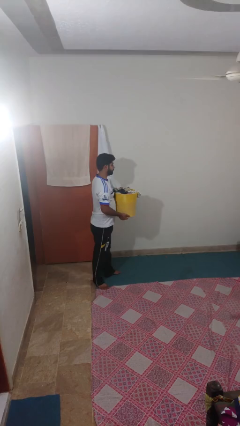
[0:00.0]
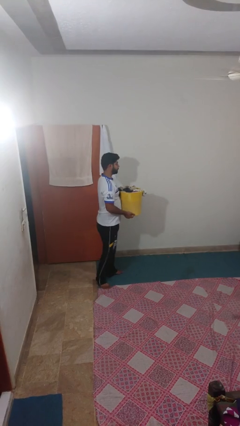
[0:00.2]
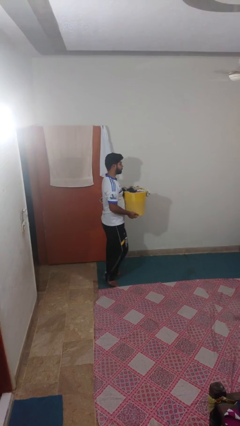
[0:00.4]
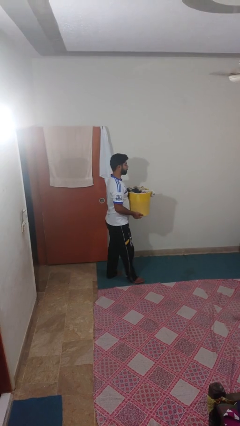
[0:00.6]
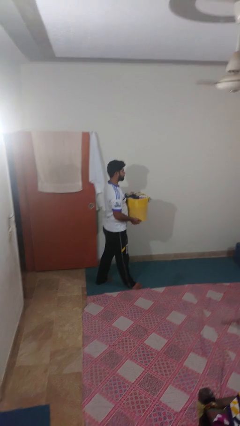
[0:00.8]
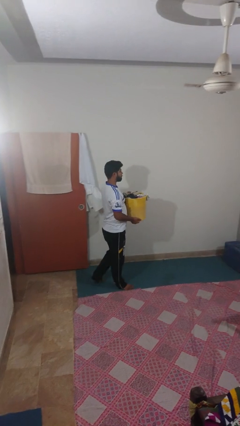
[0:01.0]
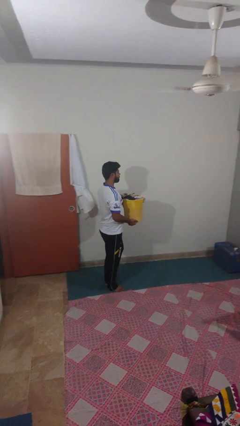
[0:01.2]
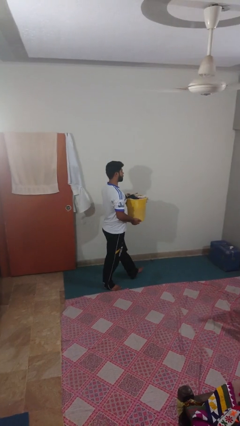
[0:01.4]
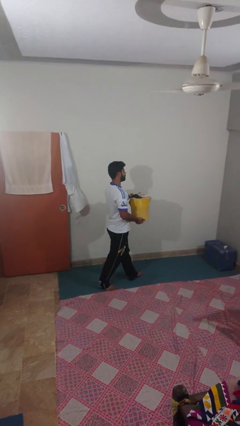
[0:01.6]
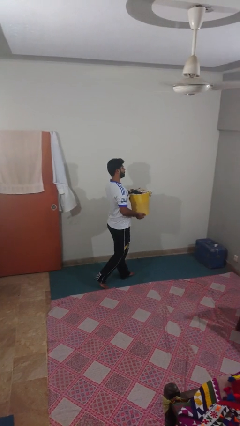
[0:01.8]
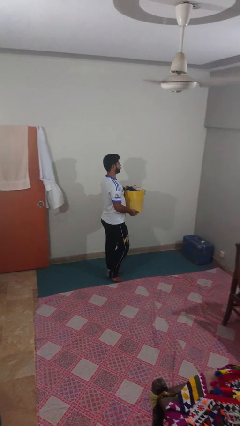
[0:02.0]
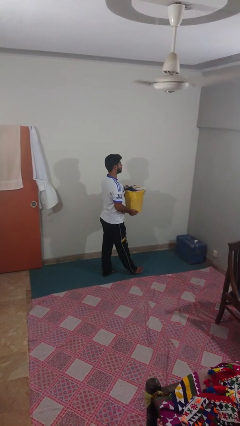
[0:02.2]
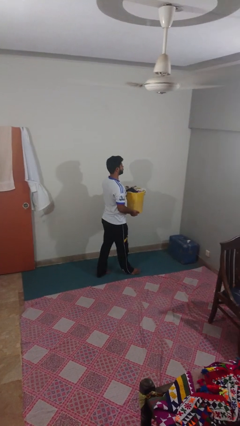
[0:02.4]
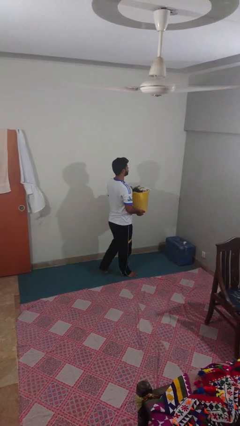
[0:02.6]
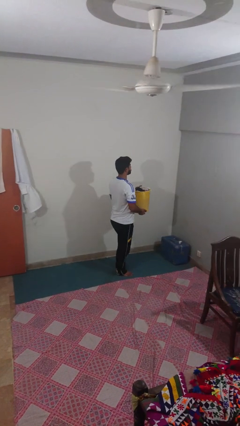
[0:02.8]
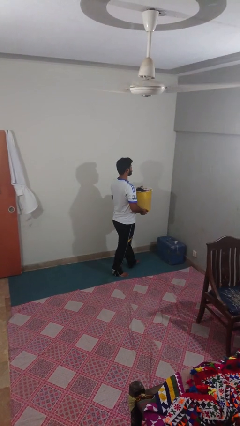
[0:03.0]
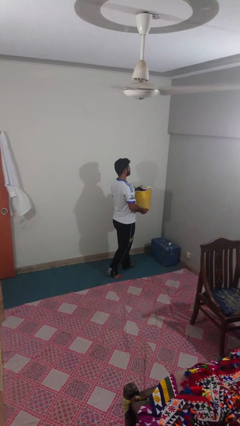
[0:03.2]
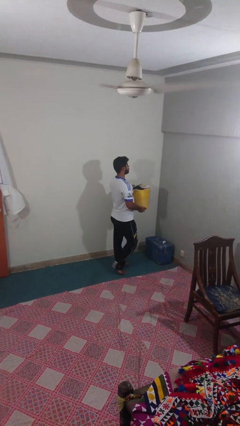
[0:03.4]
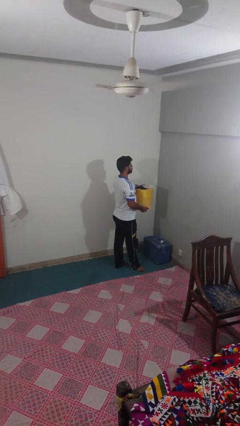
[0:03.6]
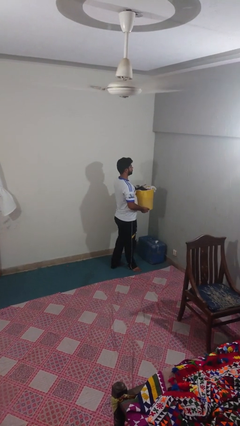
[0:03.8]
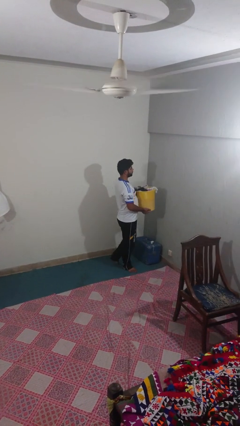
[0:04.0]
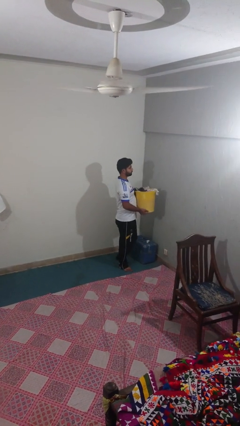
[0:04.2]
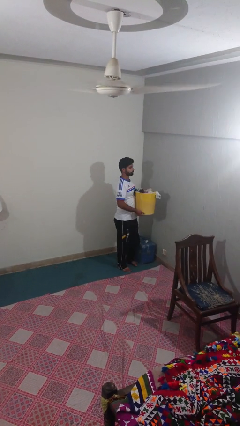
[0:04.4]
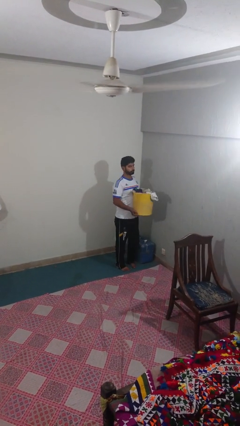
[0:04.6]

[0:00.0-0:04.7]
person carries laundry basket

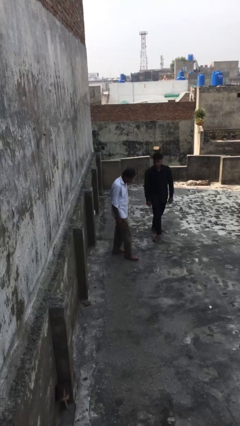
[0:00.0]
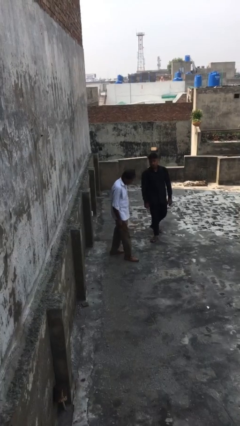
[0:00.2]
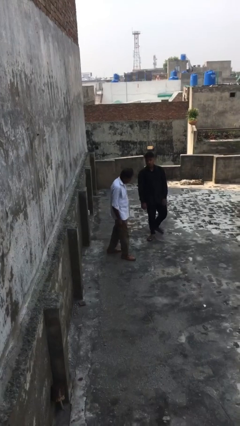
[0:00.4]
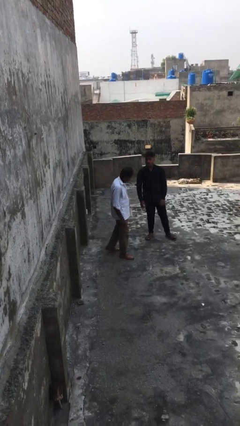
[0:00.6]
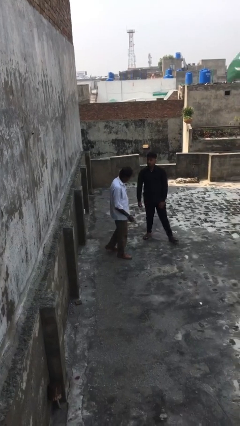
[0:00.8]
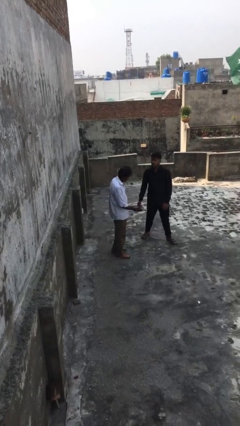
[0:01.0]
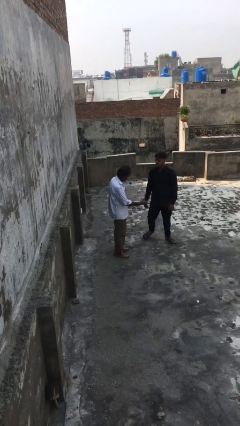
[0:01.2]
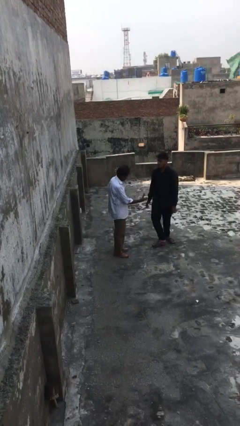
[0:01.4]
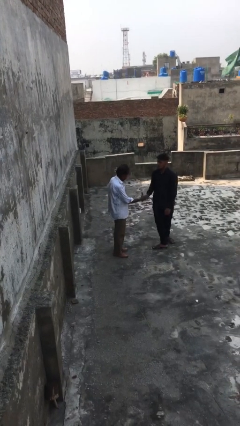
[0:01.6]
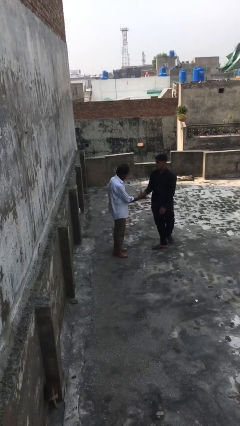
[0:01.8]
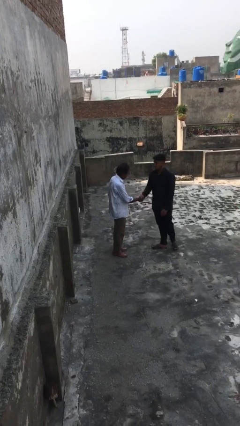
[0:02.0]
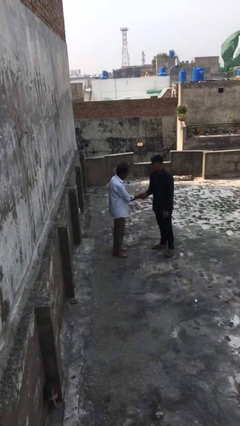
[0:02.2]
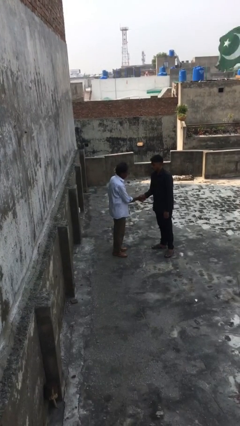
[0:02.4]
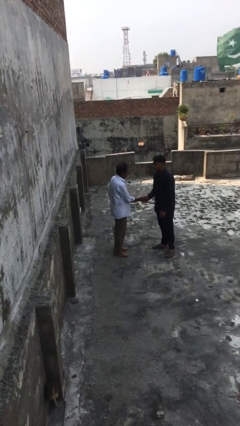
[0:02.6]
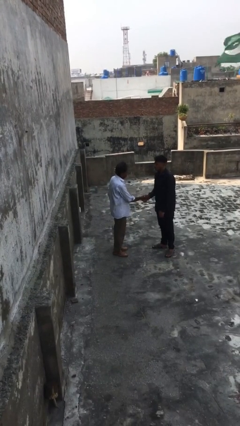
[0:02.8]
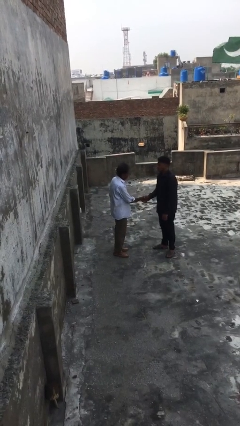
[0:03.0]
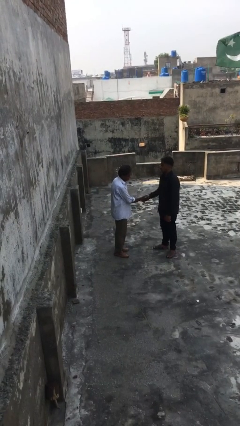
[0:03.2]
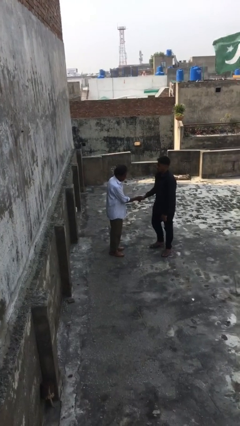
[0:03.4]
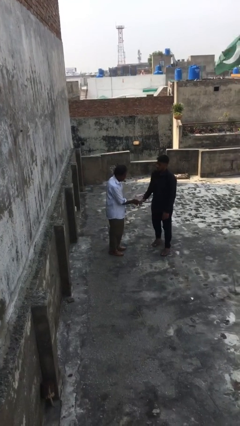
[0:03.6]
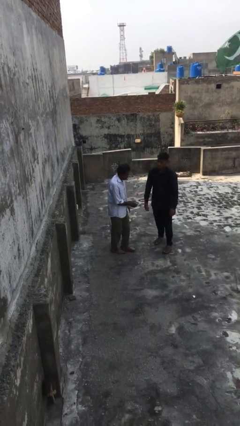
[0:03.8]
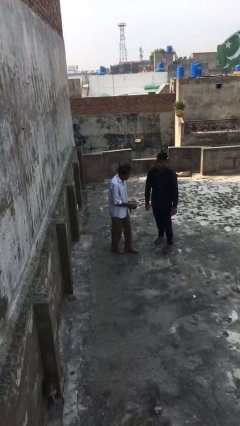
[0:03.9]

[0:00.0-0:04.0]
person shakes hand

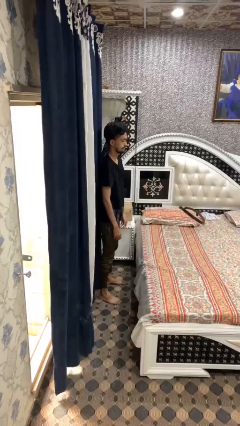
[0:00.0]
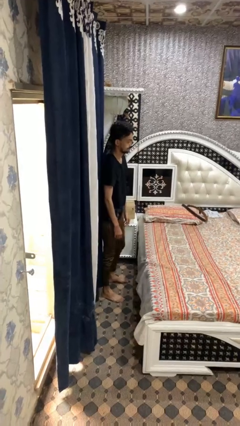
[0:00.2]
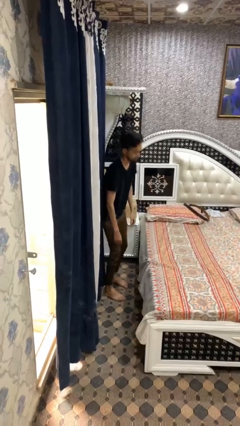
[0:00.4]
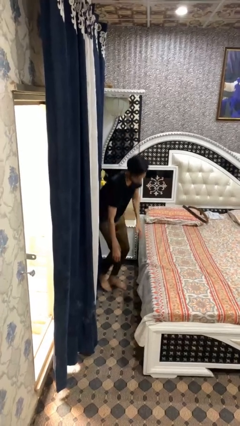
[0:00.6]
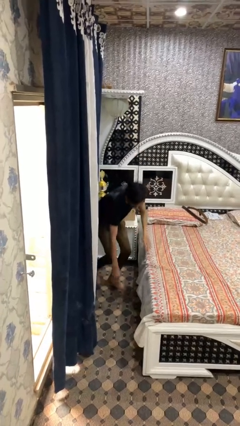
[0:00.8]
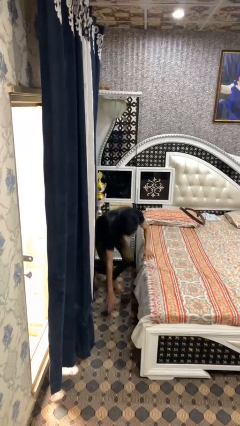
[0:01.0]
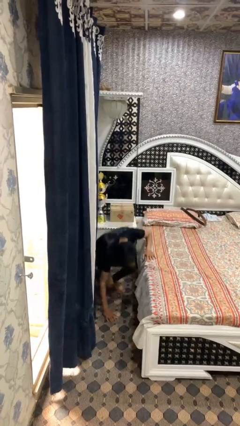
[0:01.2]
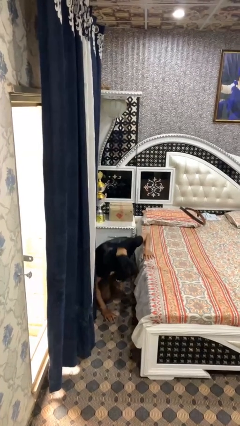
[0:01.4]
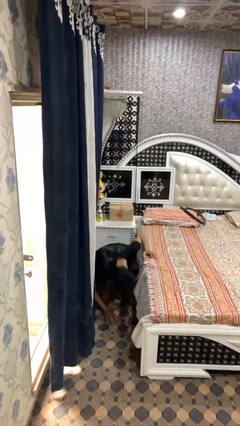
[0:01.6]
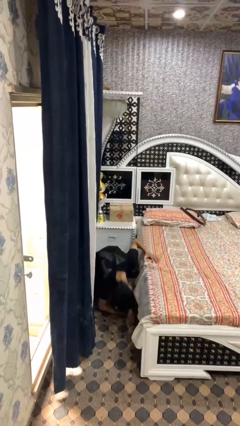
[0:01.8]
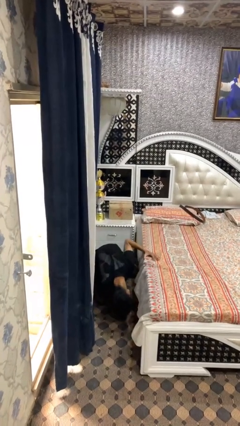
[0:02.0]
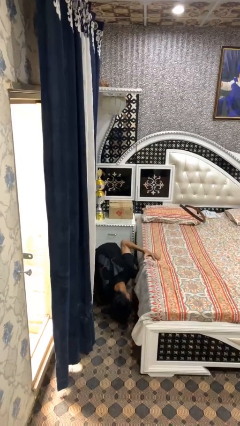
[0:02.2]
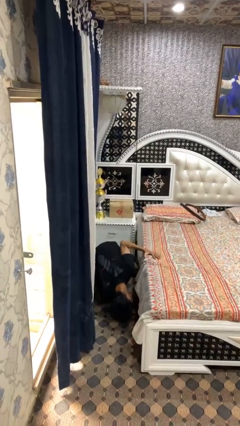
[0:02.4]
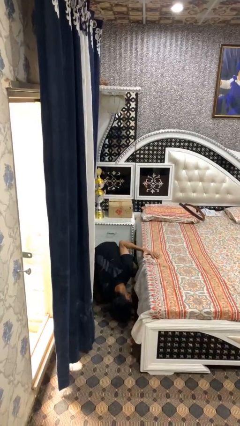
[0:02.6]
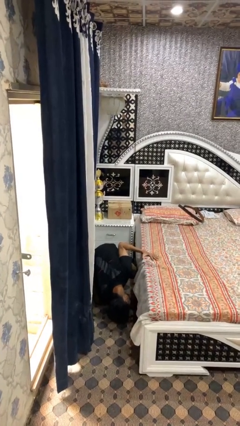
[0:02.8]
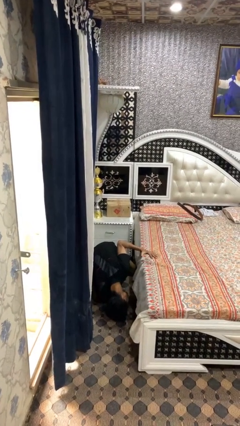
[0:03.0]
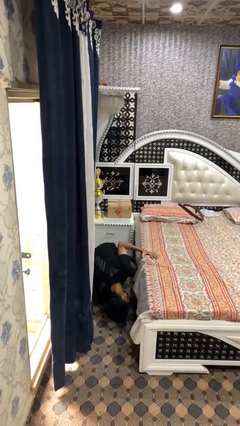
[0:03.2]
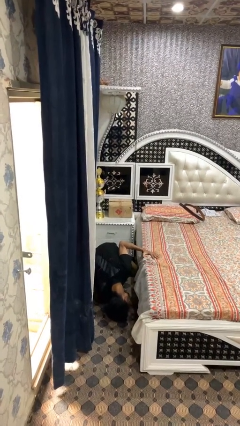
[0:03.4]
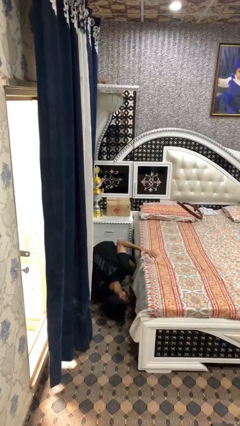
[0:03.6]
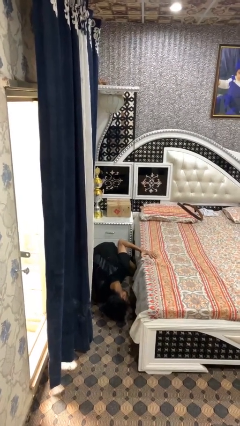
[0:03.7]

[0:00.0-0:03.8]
person searches under bed

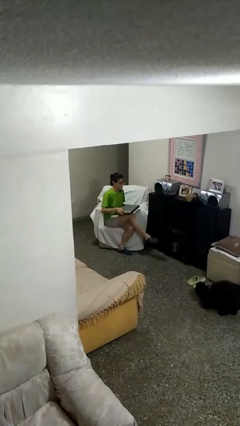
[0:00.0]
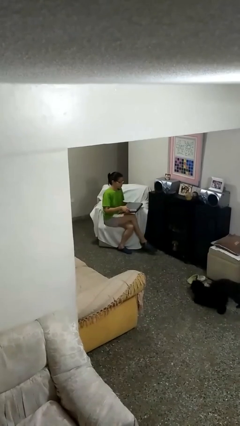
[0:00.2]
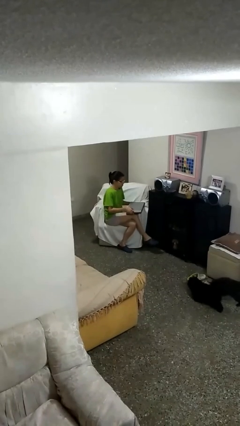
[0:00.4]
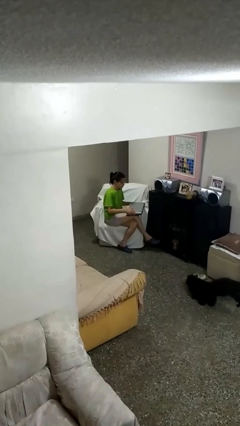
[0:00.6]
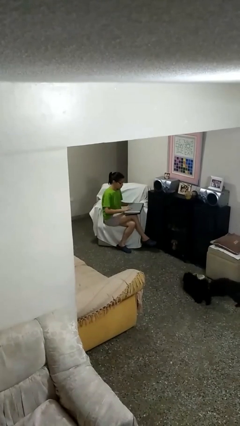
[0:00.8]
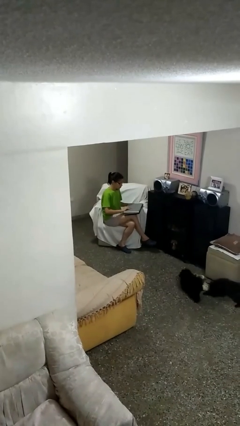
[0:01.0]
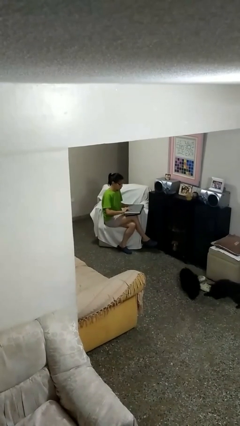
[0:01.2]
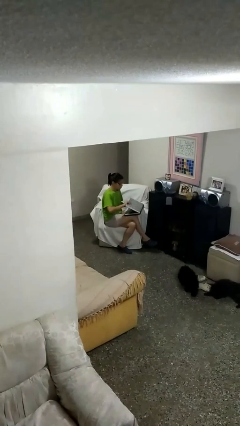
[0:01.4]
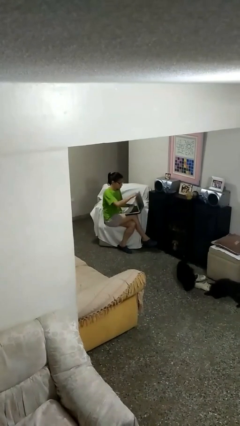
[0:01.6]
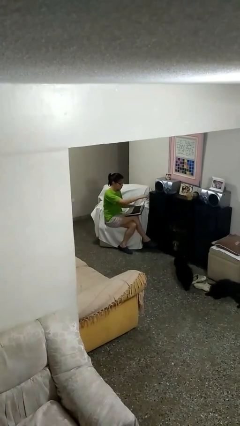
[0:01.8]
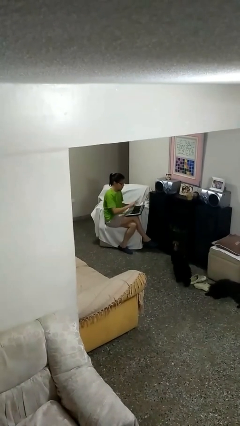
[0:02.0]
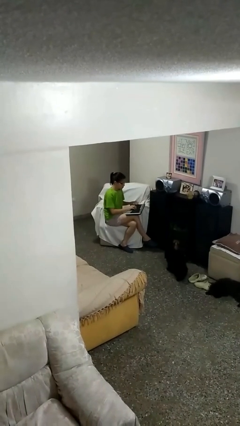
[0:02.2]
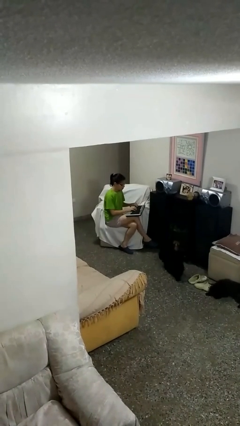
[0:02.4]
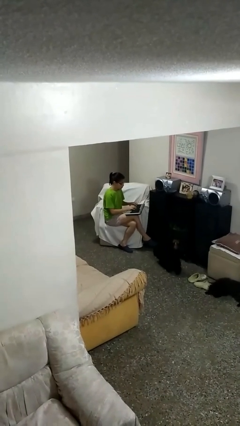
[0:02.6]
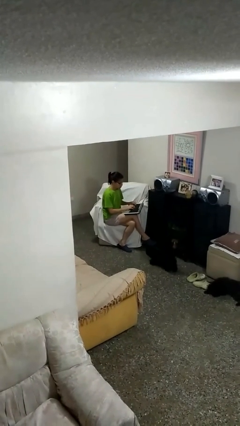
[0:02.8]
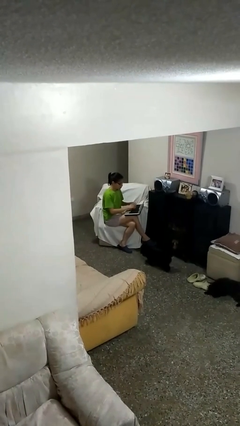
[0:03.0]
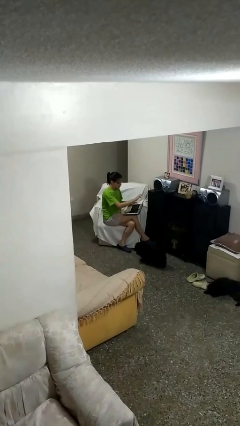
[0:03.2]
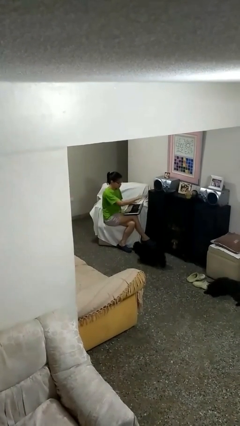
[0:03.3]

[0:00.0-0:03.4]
person interacts with laptop

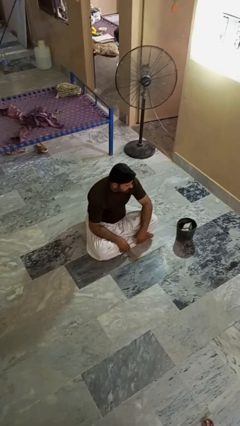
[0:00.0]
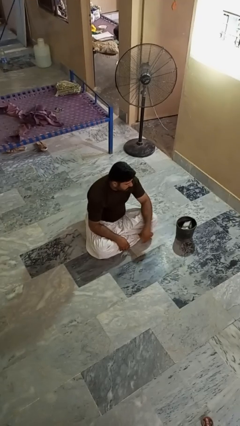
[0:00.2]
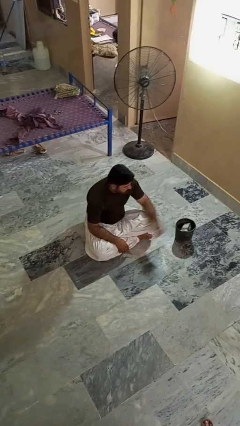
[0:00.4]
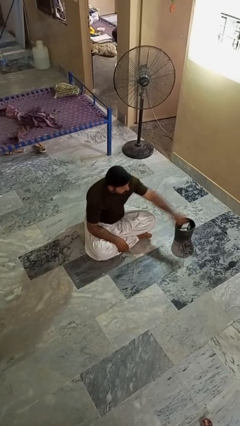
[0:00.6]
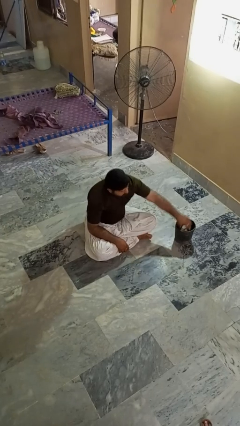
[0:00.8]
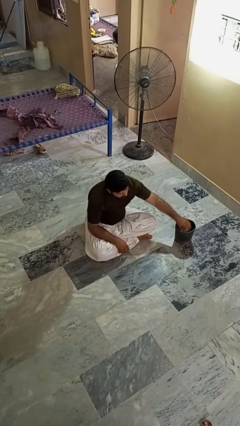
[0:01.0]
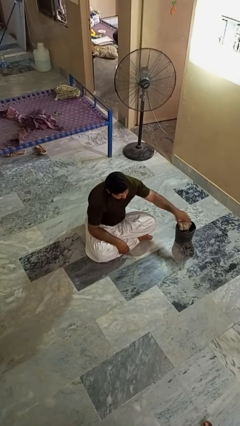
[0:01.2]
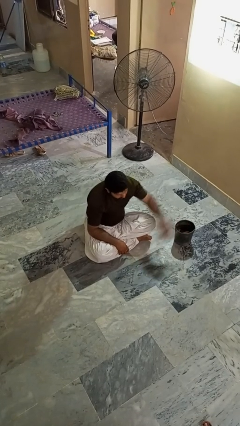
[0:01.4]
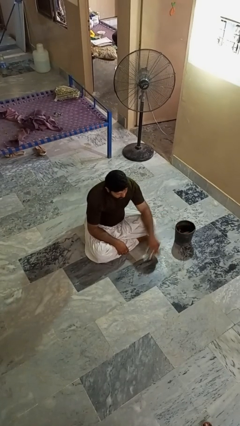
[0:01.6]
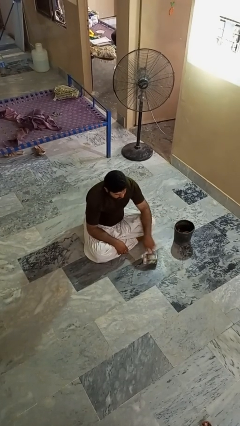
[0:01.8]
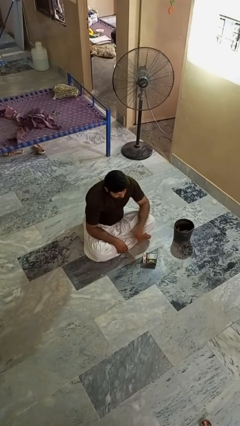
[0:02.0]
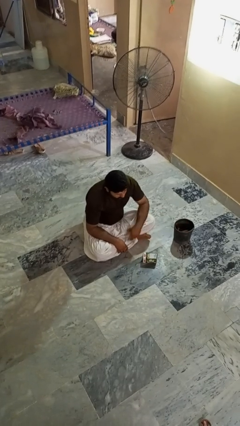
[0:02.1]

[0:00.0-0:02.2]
person takes object from basket
